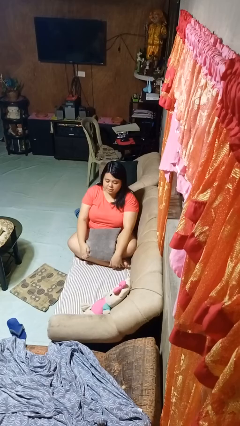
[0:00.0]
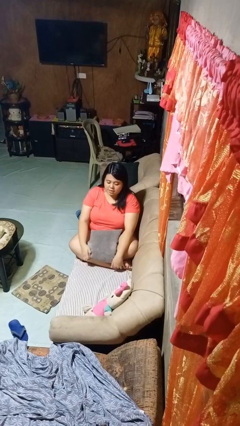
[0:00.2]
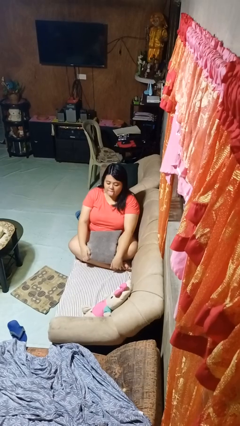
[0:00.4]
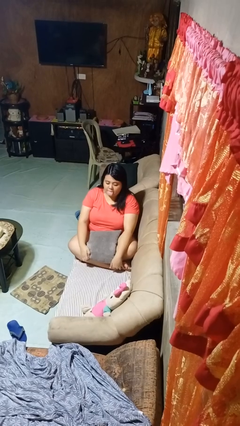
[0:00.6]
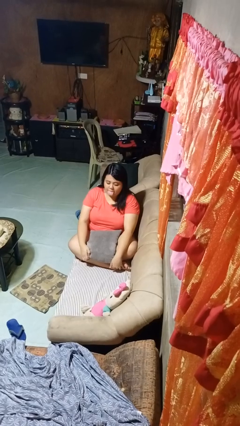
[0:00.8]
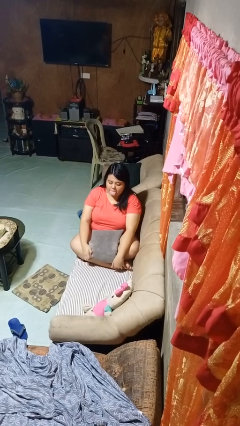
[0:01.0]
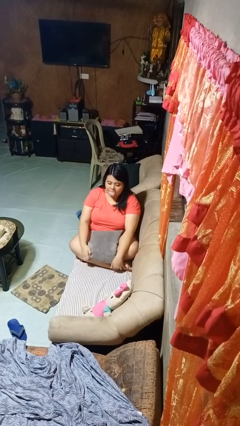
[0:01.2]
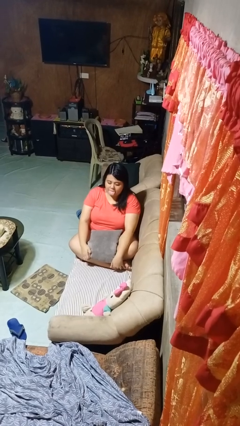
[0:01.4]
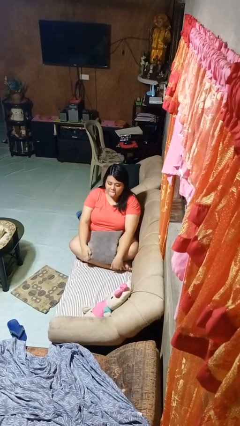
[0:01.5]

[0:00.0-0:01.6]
person sticks out tongue

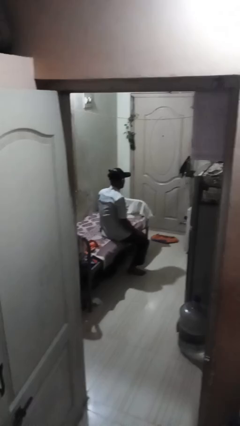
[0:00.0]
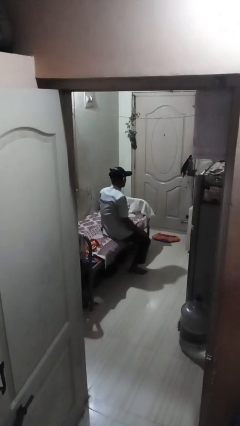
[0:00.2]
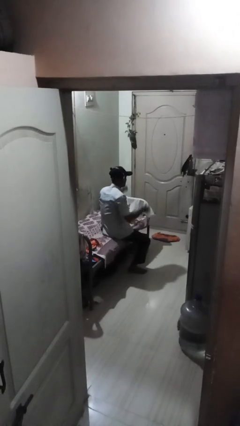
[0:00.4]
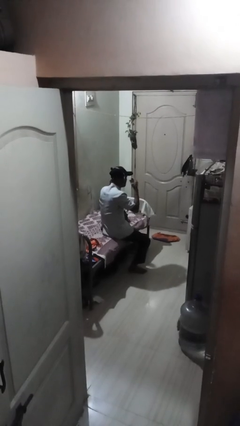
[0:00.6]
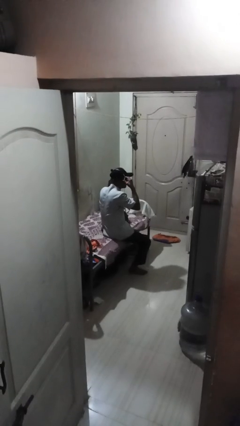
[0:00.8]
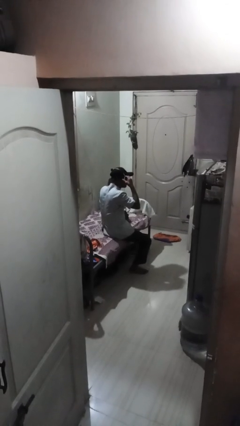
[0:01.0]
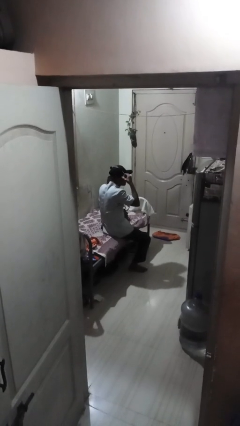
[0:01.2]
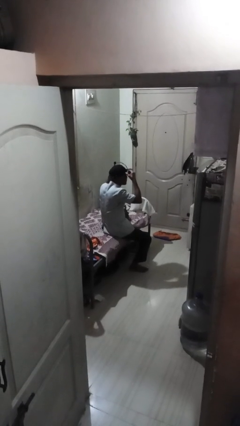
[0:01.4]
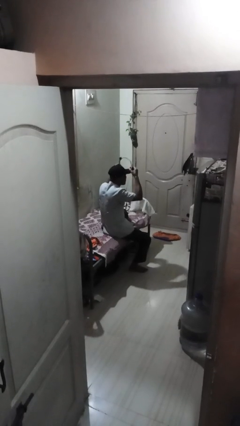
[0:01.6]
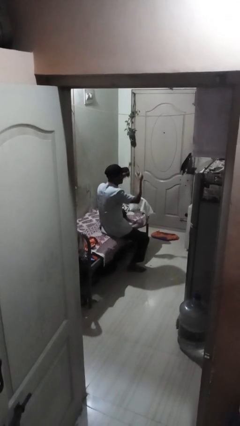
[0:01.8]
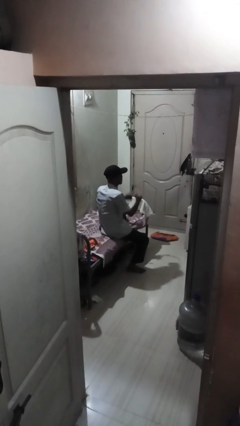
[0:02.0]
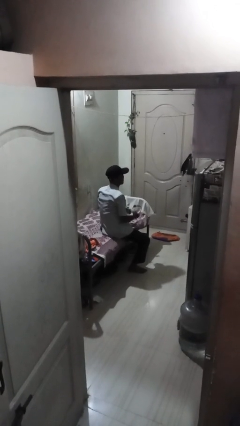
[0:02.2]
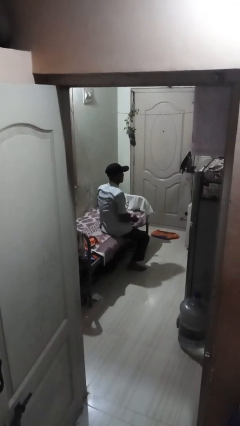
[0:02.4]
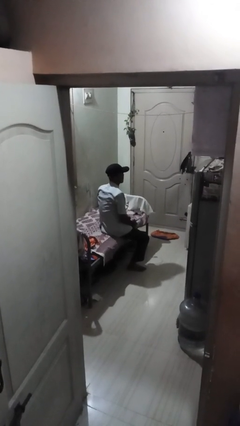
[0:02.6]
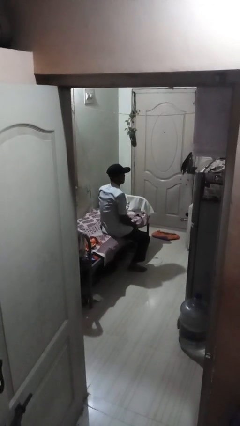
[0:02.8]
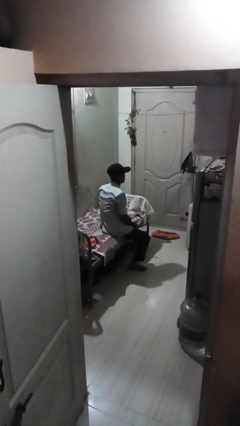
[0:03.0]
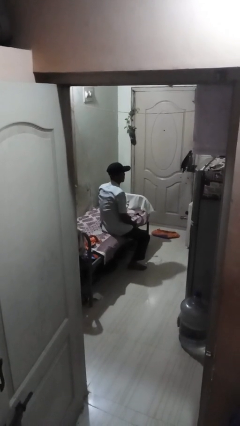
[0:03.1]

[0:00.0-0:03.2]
person takes off headphones

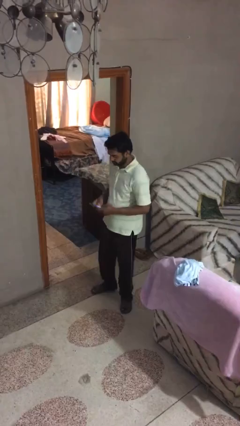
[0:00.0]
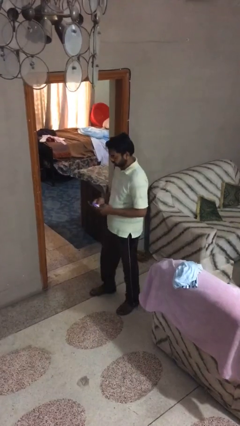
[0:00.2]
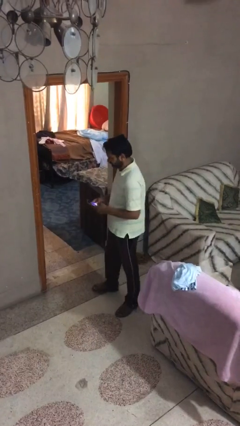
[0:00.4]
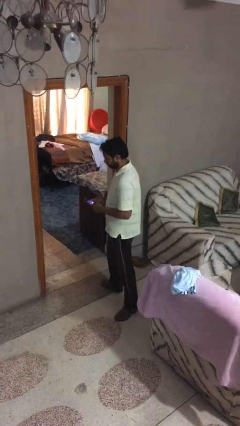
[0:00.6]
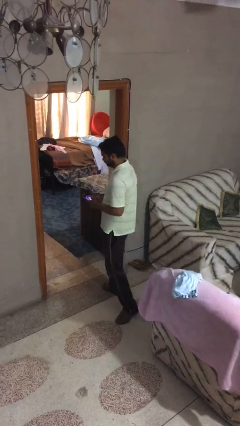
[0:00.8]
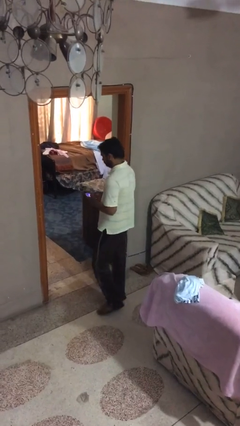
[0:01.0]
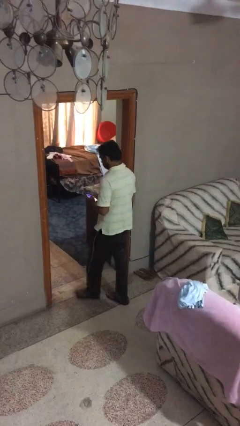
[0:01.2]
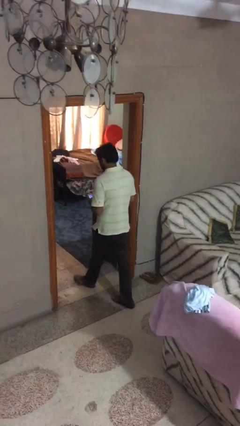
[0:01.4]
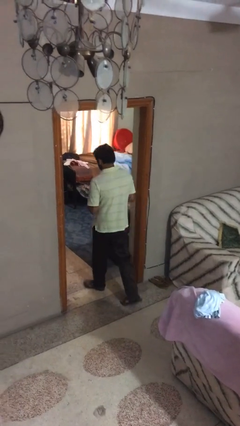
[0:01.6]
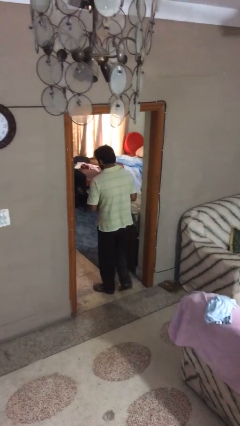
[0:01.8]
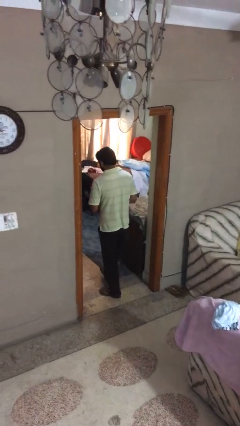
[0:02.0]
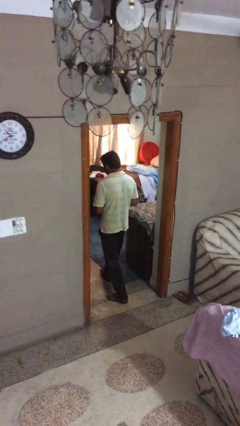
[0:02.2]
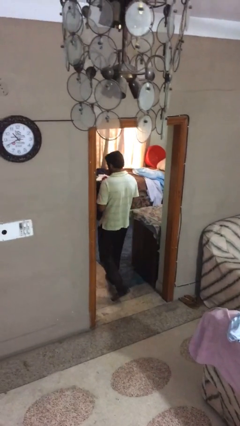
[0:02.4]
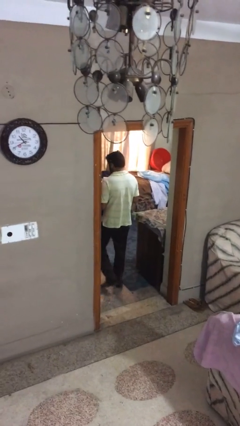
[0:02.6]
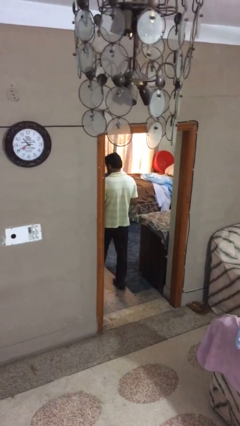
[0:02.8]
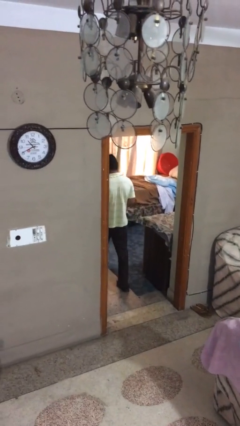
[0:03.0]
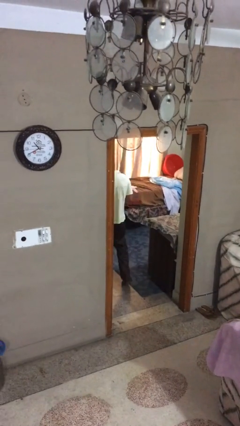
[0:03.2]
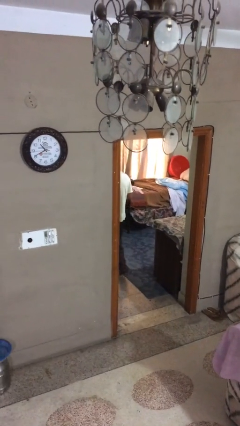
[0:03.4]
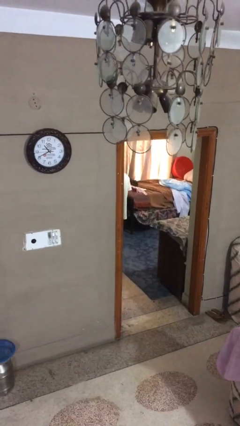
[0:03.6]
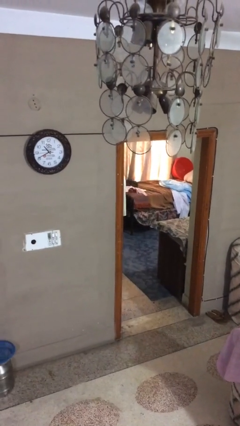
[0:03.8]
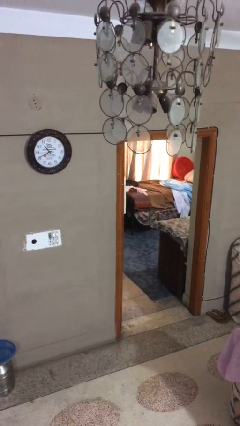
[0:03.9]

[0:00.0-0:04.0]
person exits scene through structure

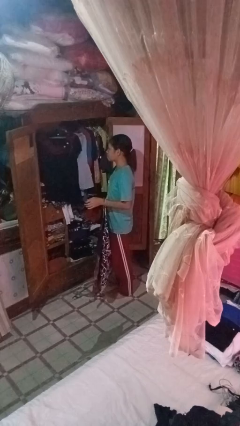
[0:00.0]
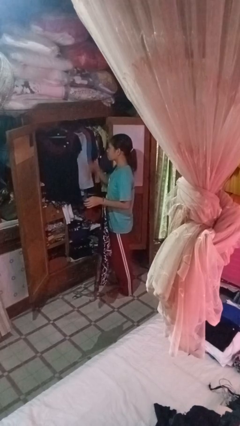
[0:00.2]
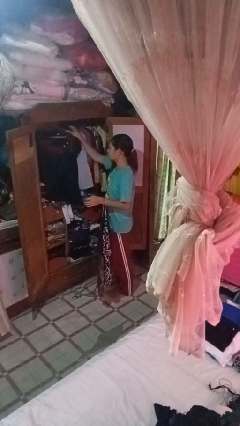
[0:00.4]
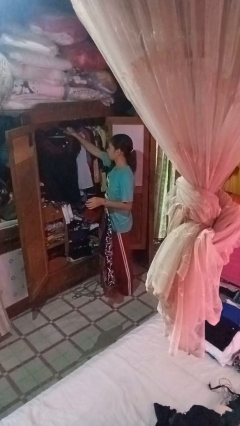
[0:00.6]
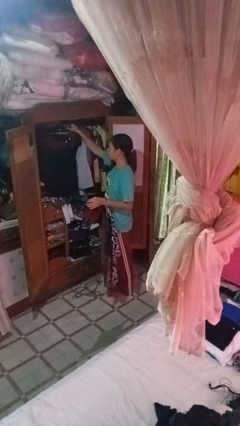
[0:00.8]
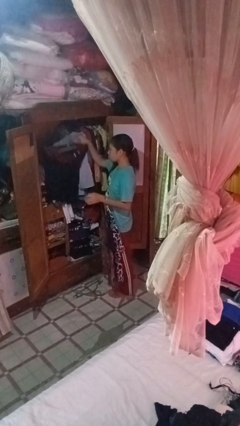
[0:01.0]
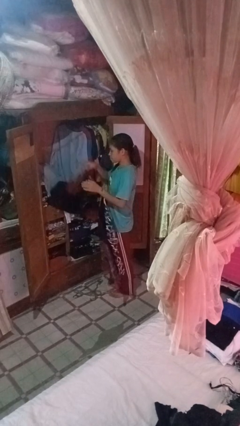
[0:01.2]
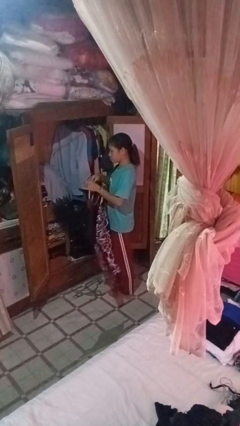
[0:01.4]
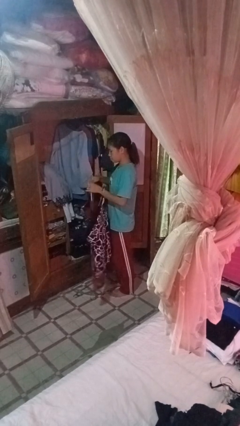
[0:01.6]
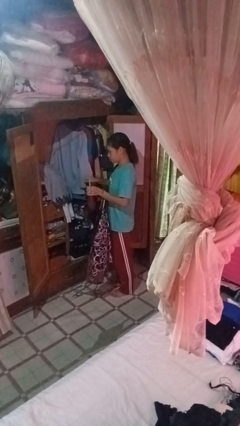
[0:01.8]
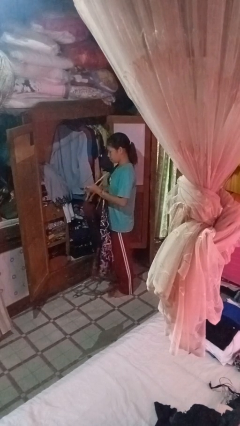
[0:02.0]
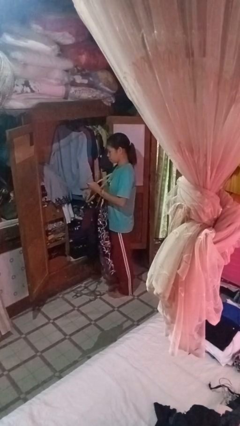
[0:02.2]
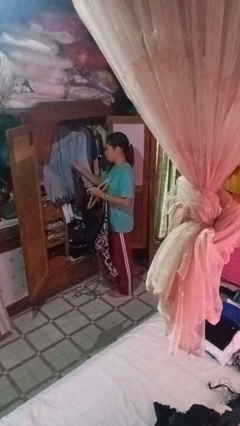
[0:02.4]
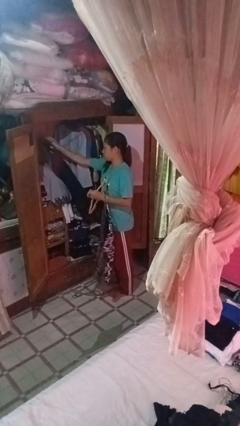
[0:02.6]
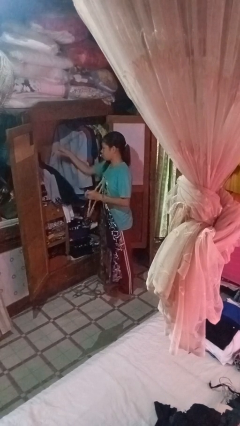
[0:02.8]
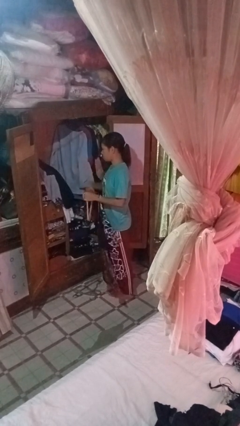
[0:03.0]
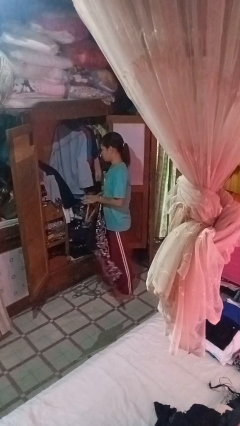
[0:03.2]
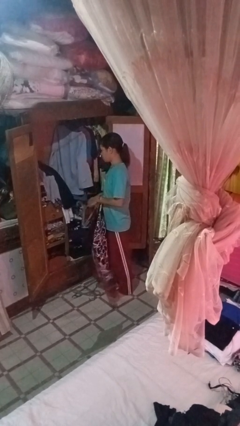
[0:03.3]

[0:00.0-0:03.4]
person takes clothes from closet

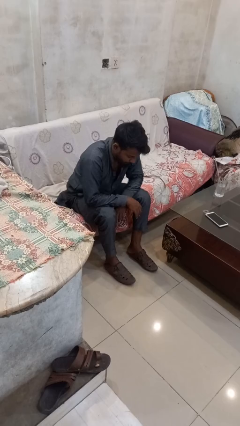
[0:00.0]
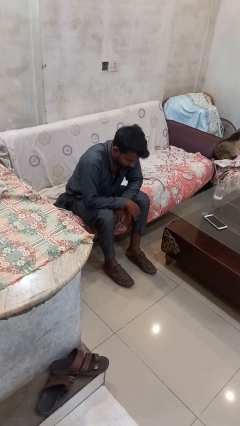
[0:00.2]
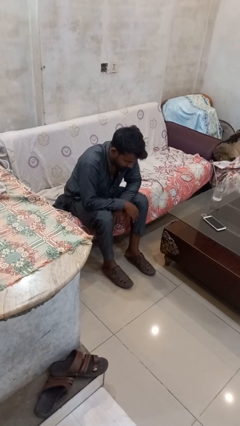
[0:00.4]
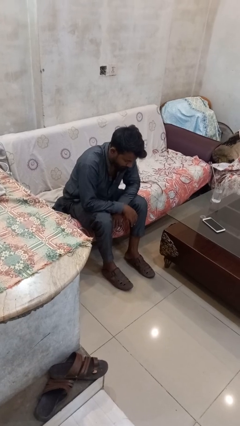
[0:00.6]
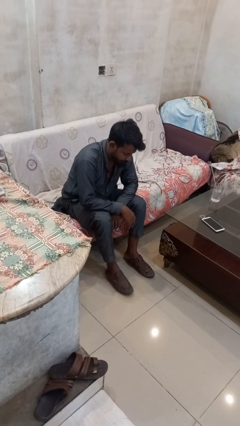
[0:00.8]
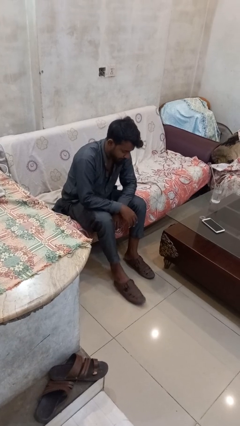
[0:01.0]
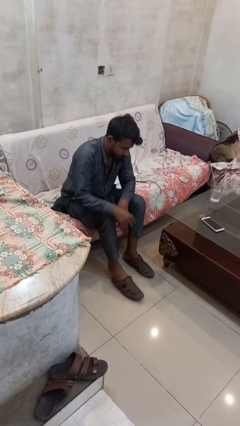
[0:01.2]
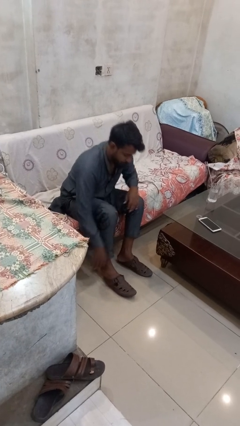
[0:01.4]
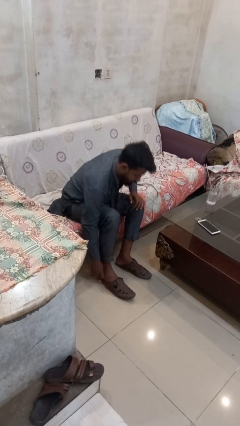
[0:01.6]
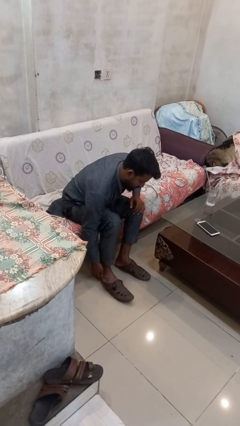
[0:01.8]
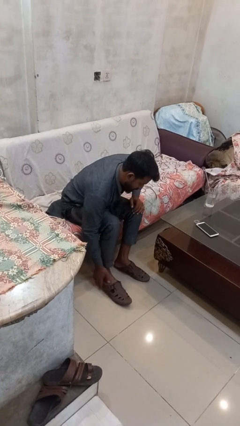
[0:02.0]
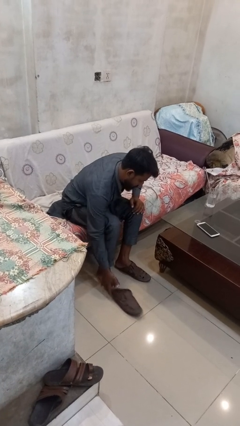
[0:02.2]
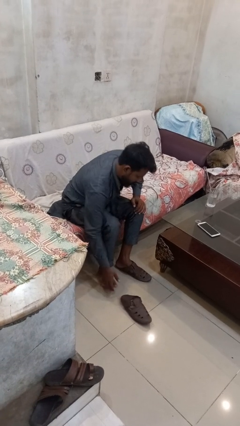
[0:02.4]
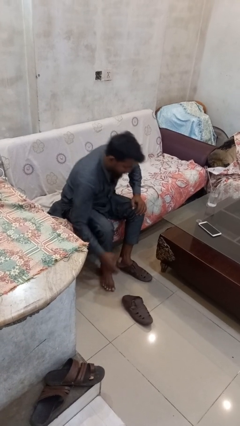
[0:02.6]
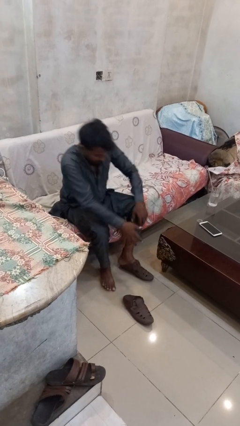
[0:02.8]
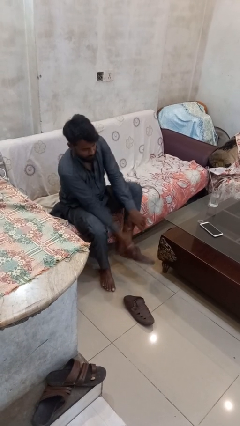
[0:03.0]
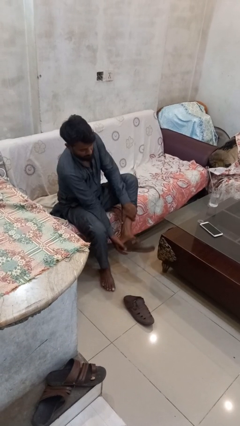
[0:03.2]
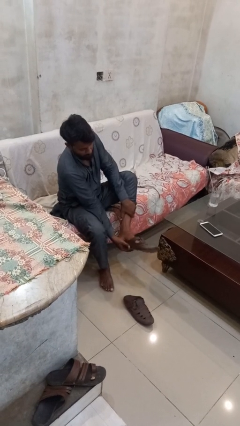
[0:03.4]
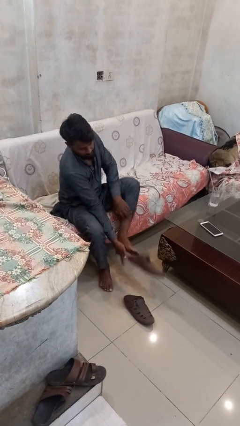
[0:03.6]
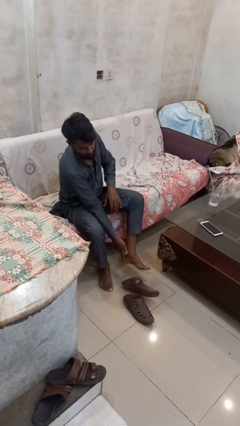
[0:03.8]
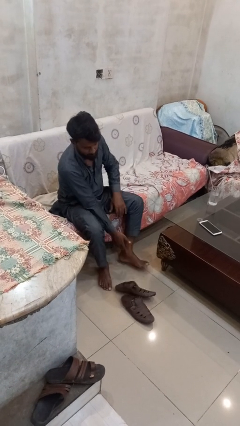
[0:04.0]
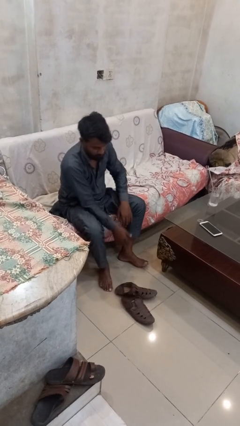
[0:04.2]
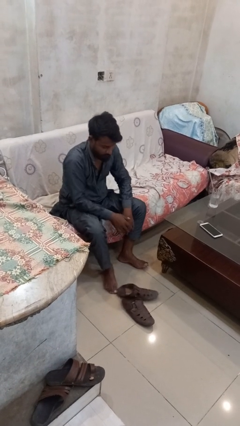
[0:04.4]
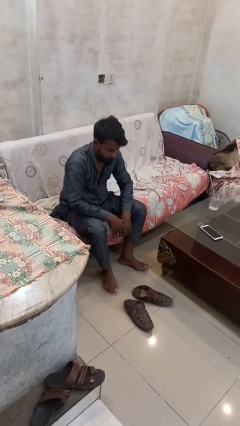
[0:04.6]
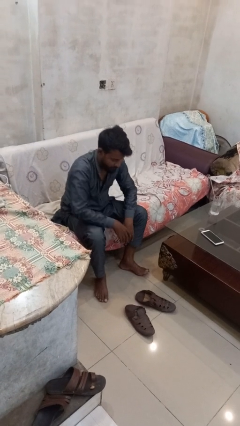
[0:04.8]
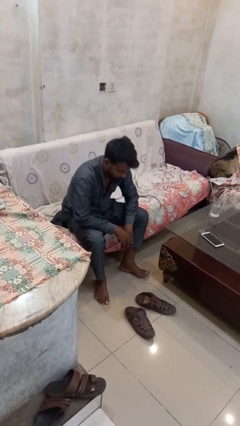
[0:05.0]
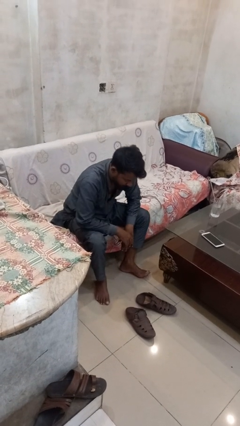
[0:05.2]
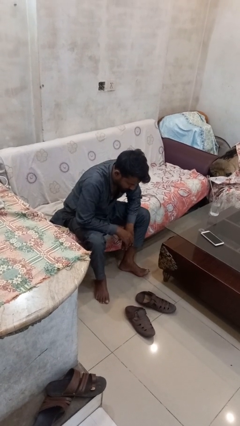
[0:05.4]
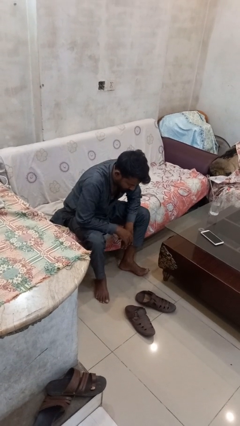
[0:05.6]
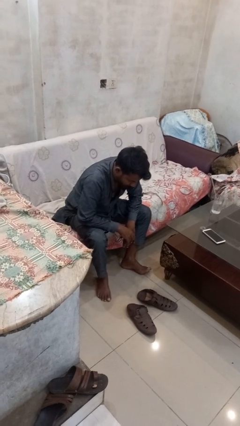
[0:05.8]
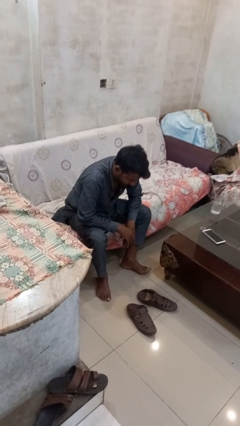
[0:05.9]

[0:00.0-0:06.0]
person takes off shoes
